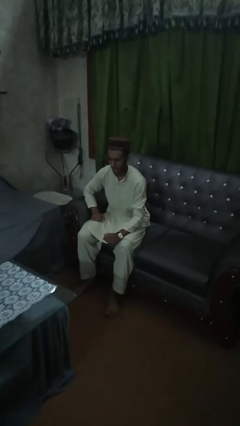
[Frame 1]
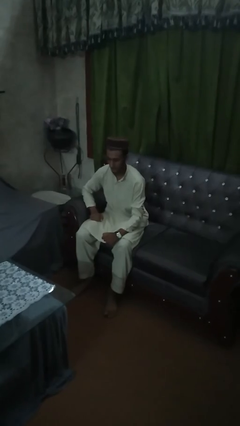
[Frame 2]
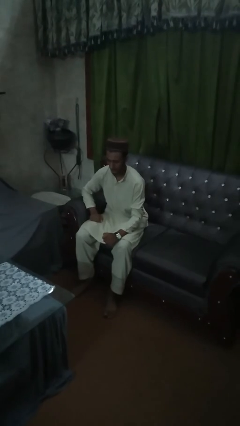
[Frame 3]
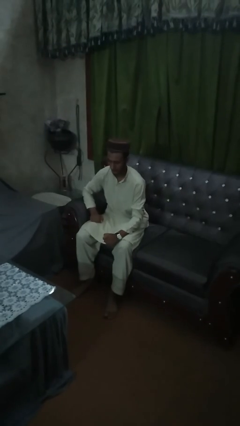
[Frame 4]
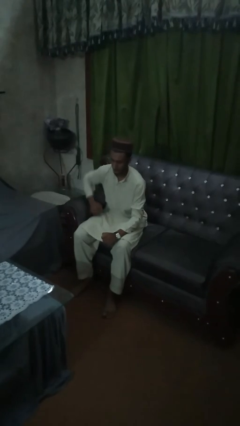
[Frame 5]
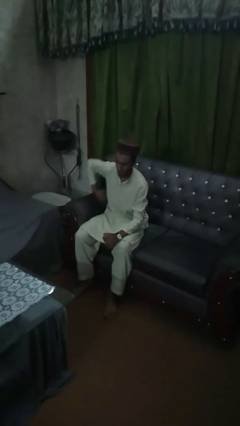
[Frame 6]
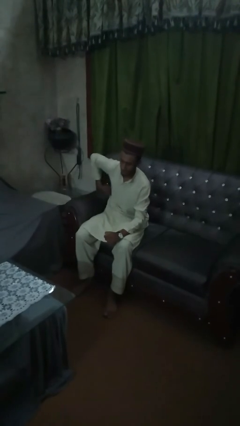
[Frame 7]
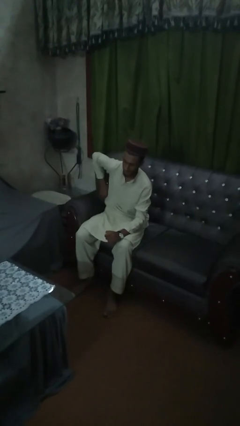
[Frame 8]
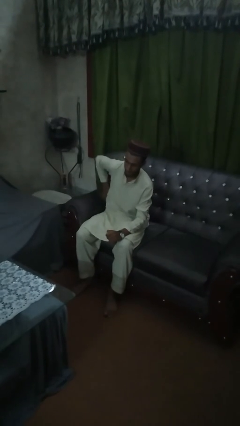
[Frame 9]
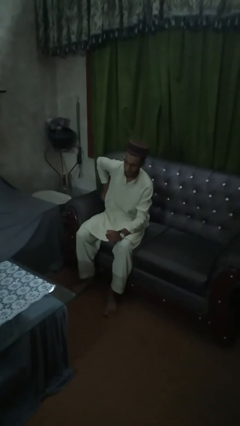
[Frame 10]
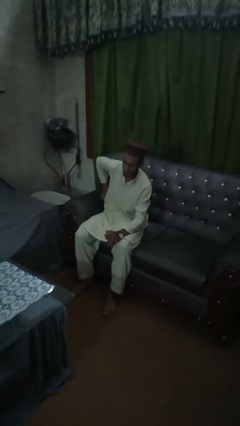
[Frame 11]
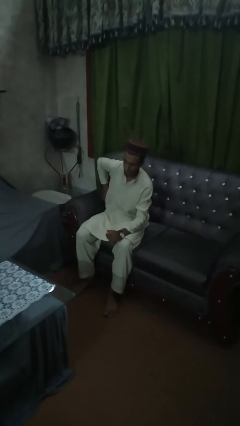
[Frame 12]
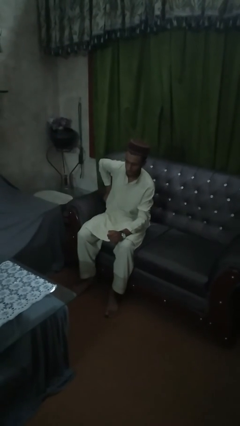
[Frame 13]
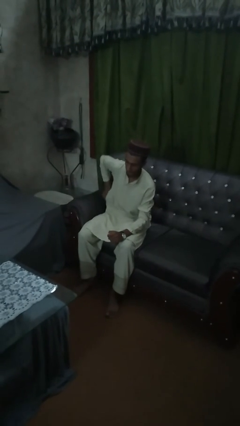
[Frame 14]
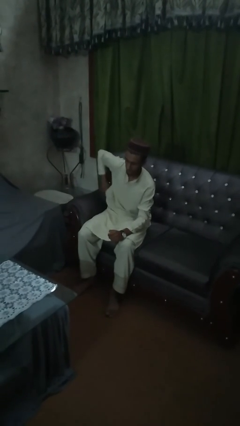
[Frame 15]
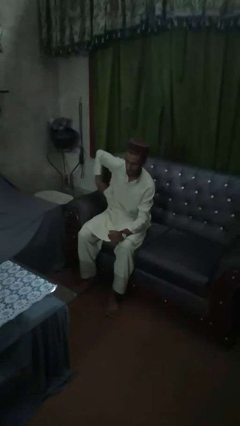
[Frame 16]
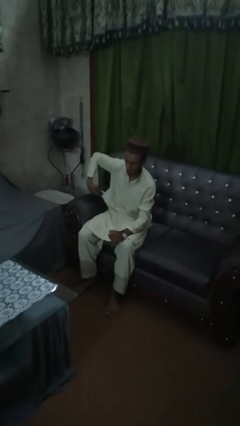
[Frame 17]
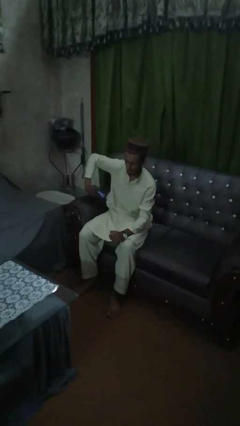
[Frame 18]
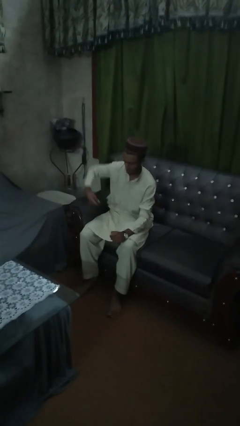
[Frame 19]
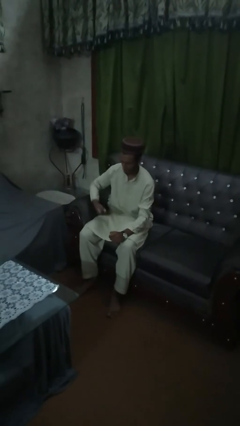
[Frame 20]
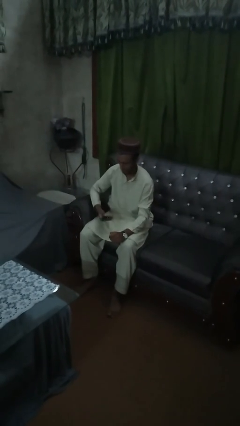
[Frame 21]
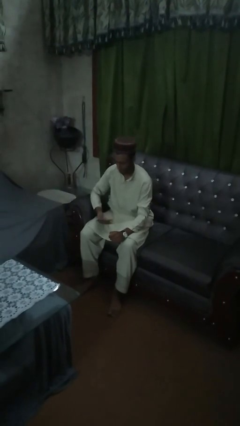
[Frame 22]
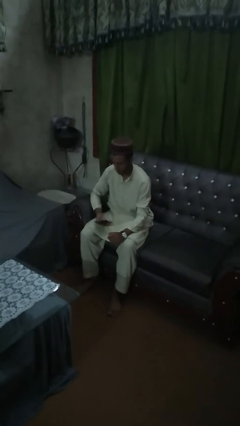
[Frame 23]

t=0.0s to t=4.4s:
person takes phone from pocket

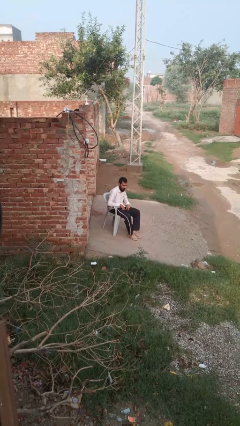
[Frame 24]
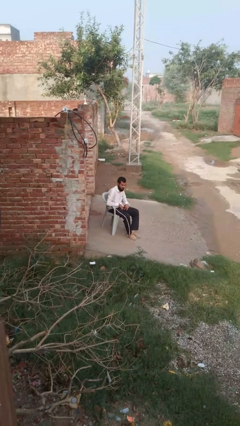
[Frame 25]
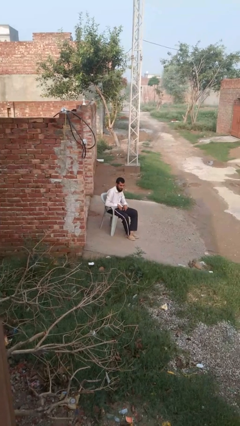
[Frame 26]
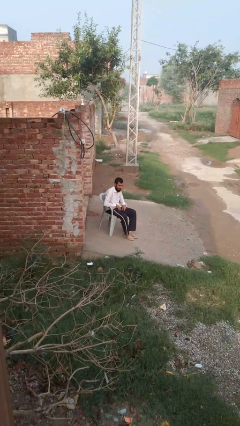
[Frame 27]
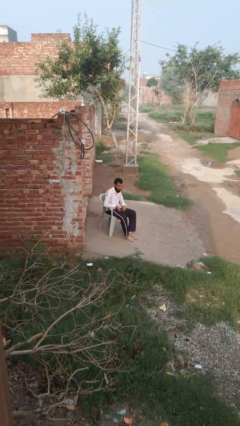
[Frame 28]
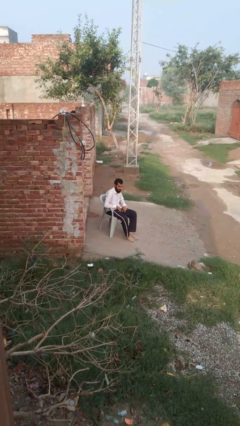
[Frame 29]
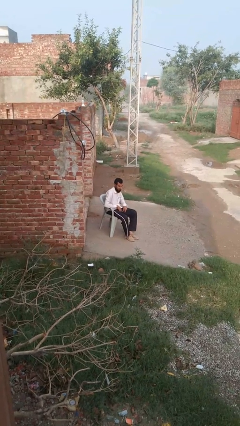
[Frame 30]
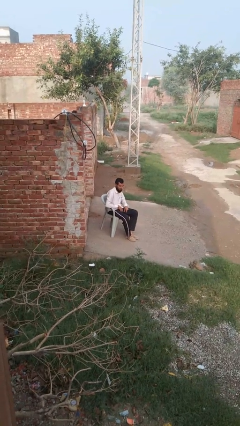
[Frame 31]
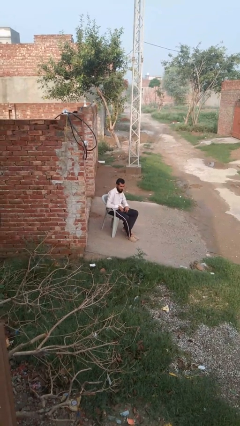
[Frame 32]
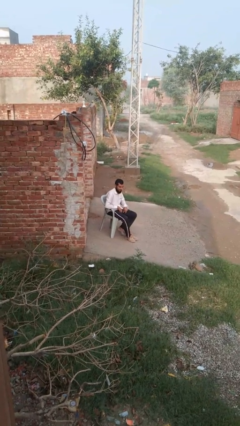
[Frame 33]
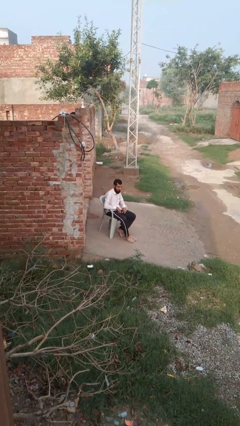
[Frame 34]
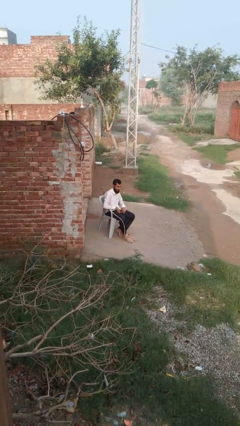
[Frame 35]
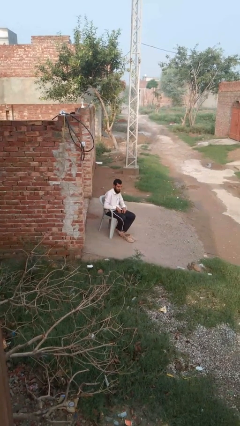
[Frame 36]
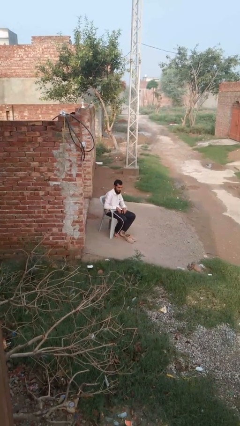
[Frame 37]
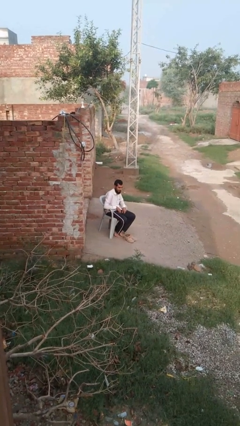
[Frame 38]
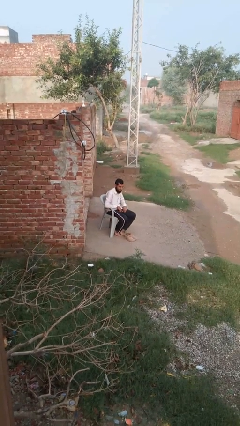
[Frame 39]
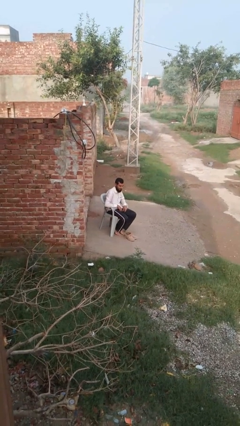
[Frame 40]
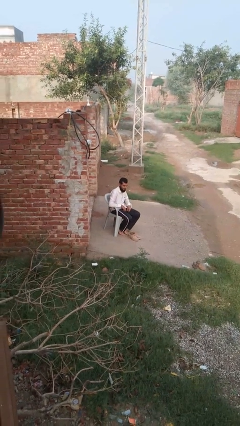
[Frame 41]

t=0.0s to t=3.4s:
person takes off shoes

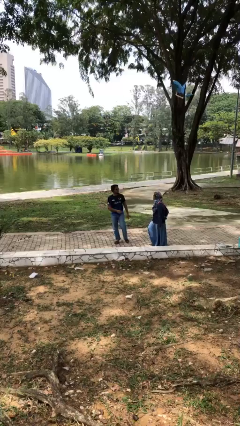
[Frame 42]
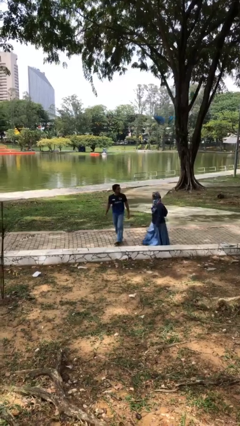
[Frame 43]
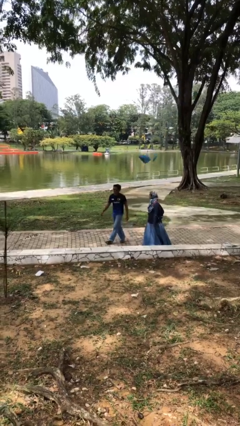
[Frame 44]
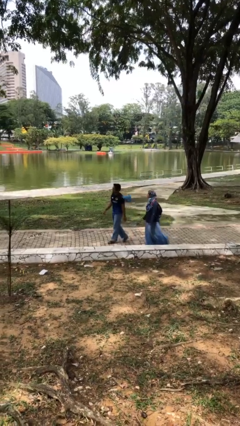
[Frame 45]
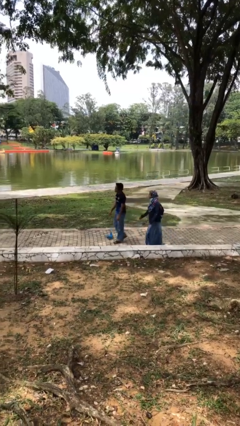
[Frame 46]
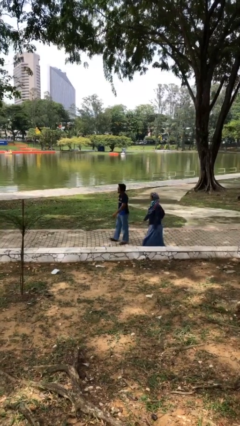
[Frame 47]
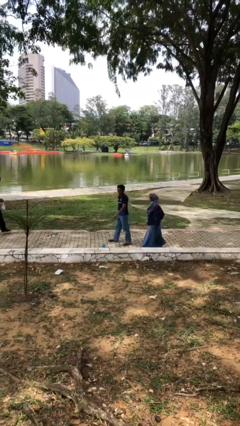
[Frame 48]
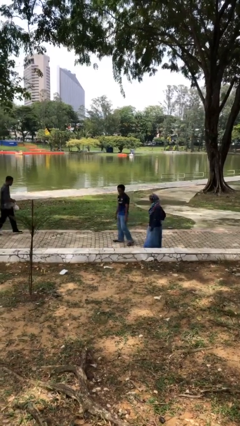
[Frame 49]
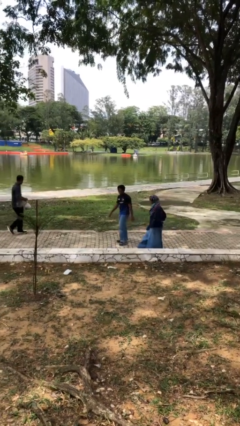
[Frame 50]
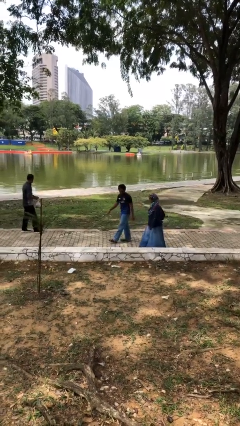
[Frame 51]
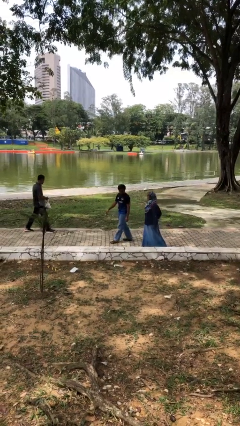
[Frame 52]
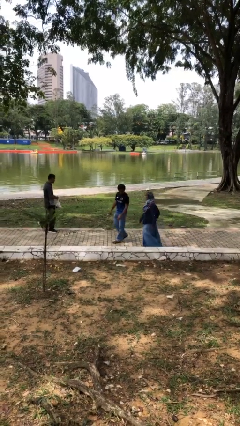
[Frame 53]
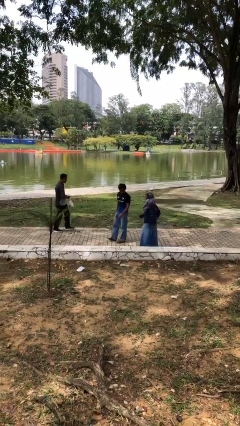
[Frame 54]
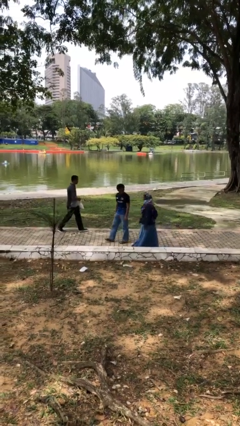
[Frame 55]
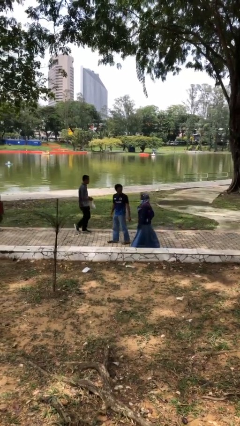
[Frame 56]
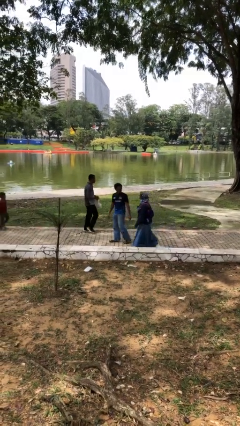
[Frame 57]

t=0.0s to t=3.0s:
person talks to person

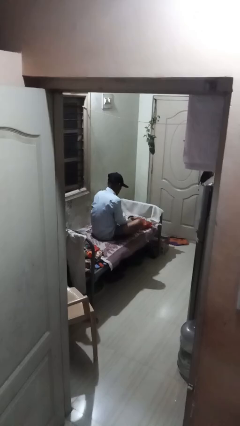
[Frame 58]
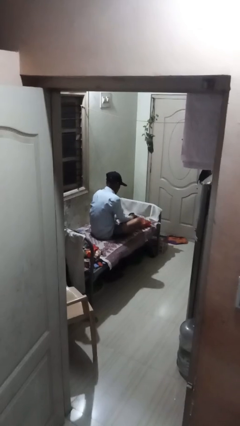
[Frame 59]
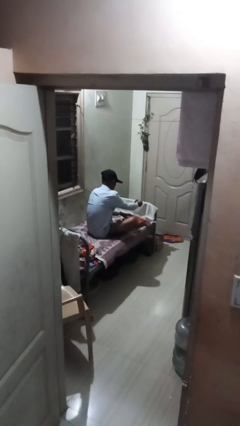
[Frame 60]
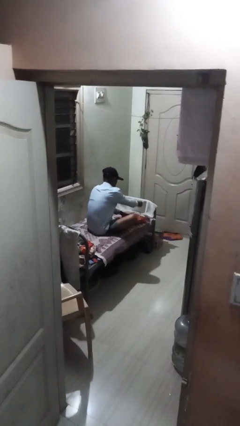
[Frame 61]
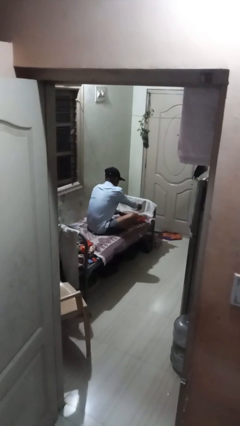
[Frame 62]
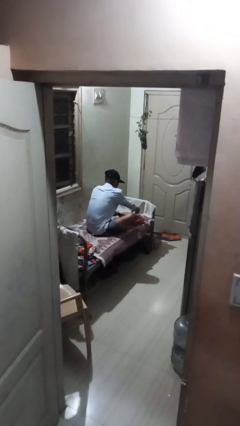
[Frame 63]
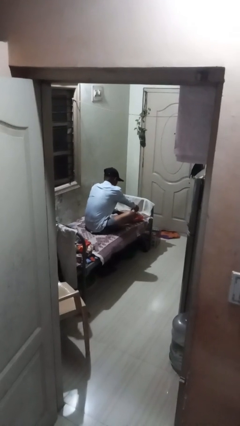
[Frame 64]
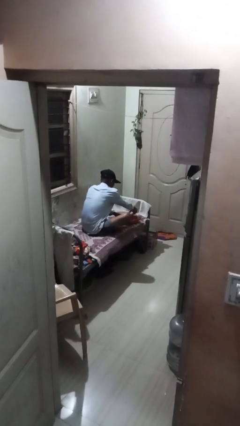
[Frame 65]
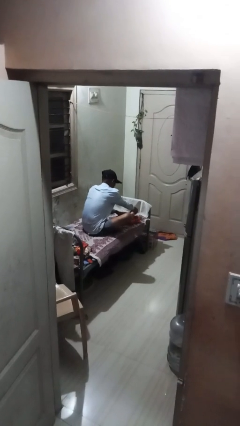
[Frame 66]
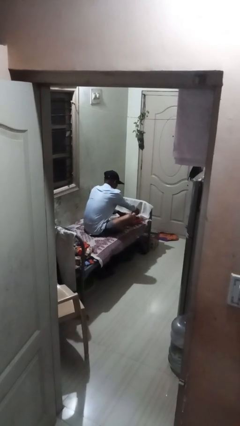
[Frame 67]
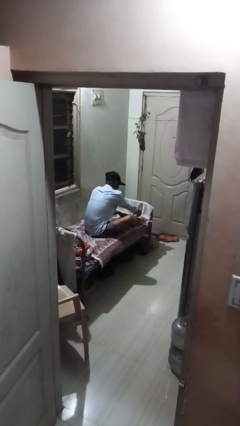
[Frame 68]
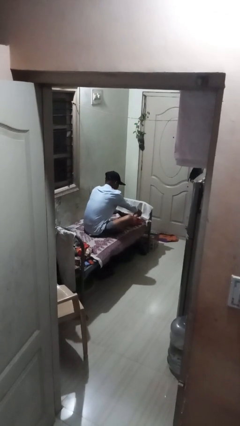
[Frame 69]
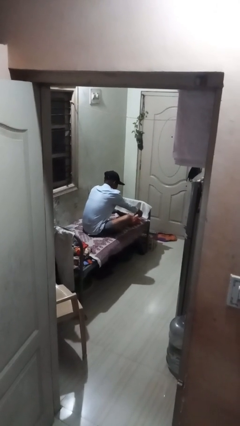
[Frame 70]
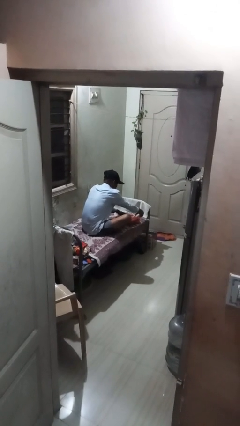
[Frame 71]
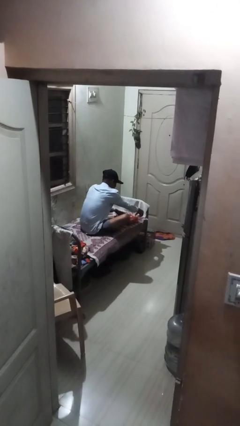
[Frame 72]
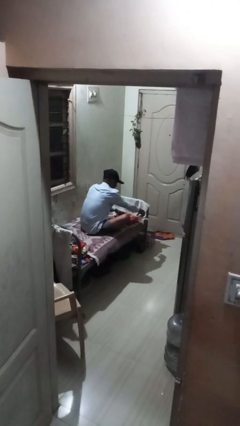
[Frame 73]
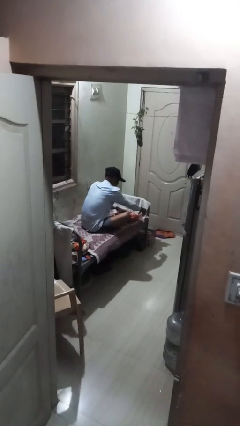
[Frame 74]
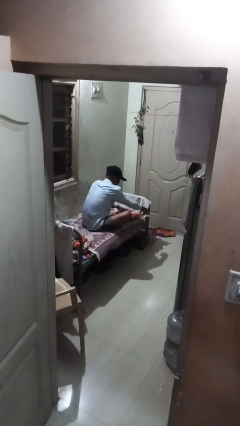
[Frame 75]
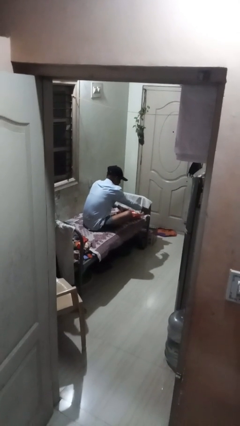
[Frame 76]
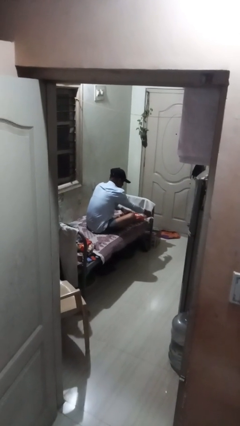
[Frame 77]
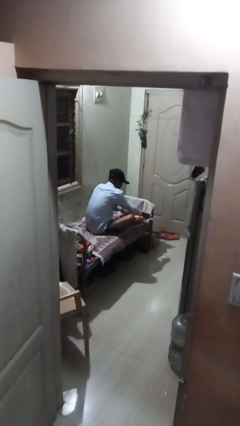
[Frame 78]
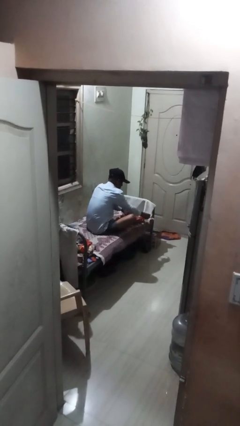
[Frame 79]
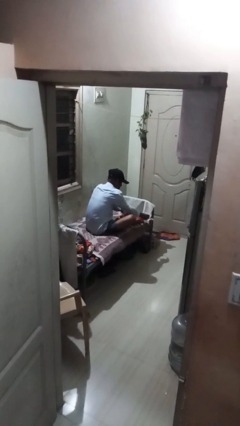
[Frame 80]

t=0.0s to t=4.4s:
person wraps box

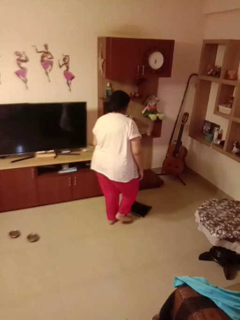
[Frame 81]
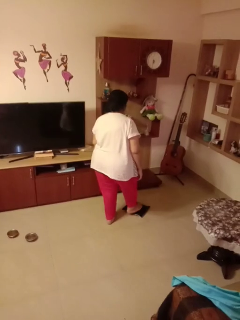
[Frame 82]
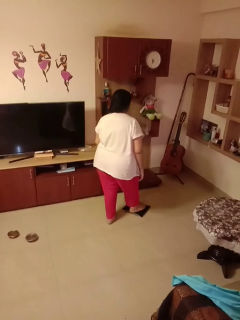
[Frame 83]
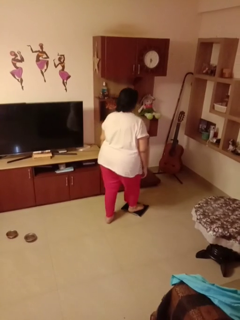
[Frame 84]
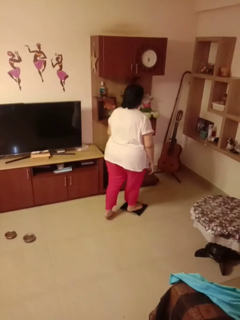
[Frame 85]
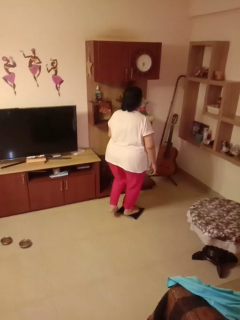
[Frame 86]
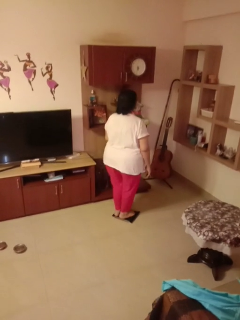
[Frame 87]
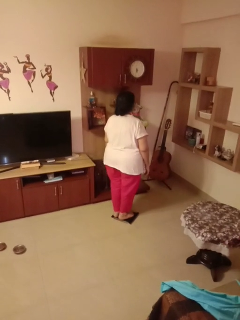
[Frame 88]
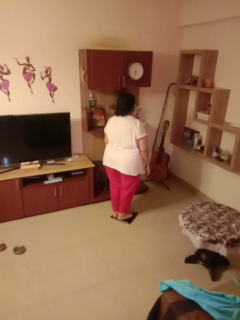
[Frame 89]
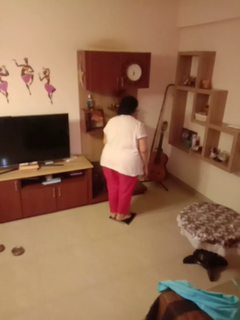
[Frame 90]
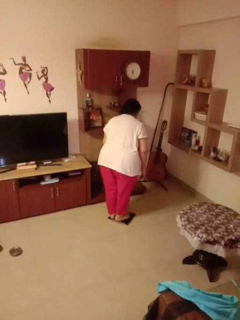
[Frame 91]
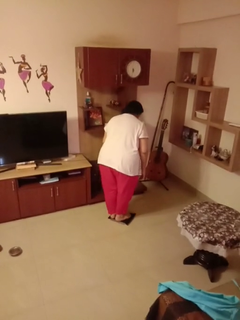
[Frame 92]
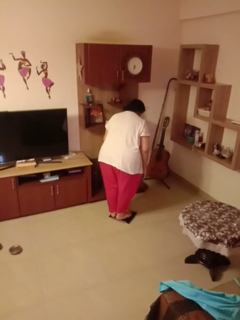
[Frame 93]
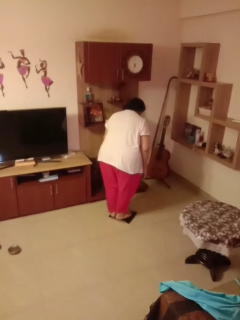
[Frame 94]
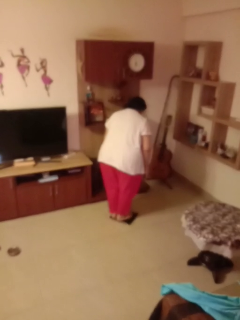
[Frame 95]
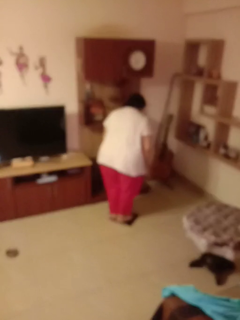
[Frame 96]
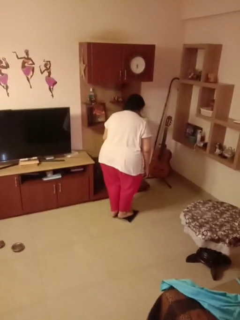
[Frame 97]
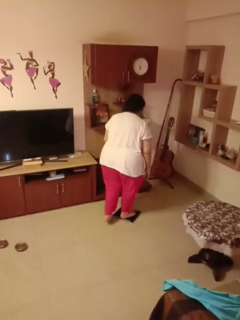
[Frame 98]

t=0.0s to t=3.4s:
person uses bodyweight scale
